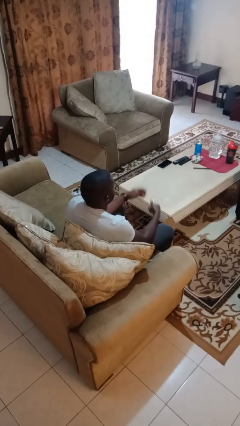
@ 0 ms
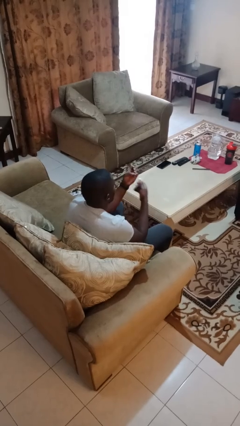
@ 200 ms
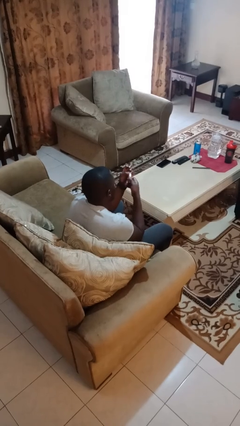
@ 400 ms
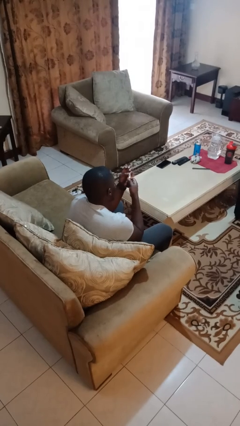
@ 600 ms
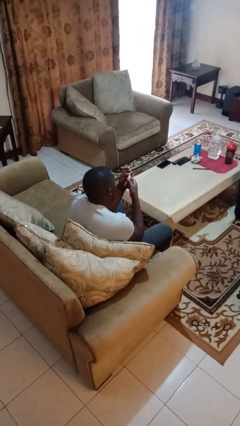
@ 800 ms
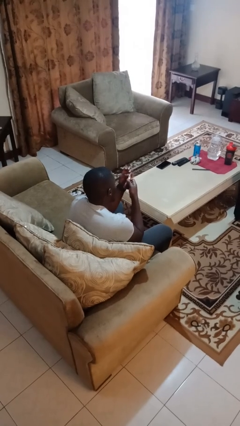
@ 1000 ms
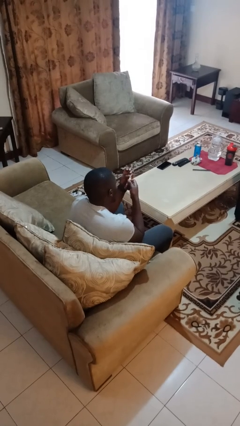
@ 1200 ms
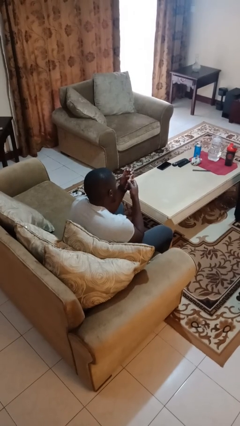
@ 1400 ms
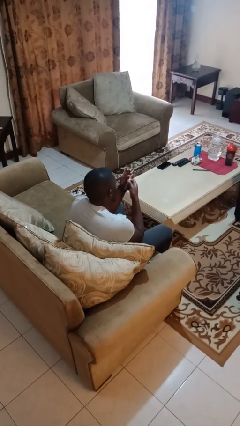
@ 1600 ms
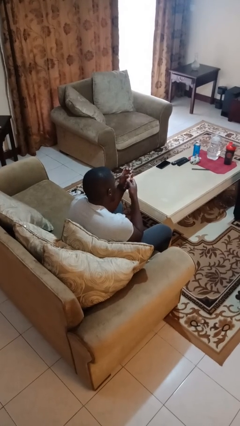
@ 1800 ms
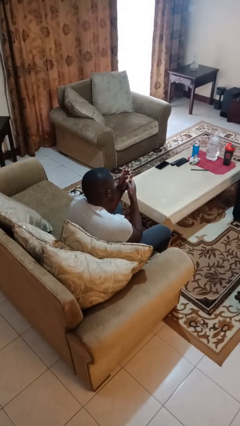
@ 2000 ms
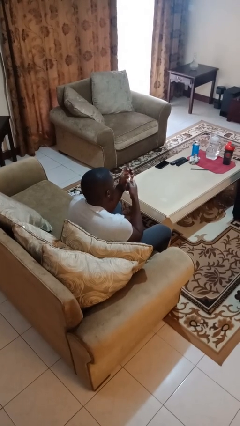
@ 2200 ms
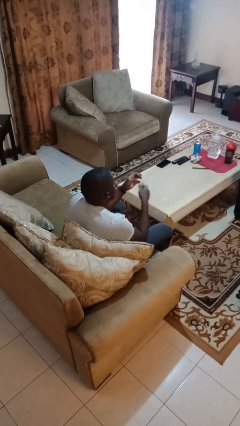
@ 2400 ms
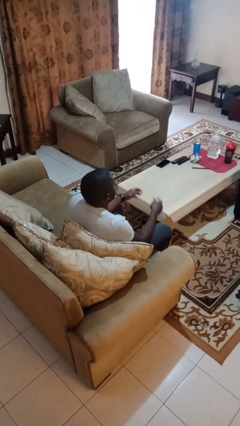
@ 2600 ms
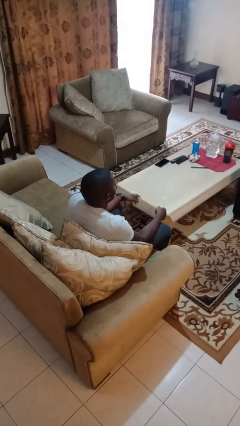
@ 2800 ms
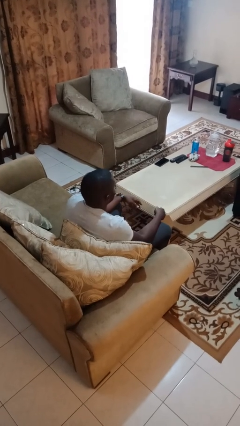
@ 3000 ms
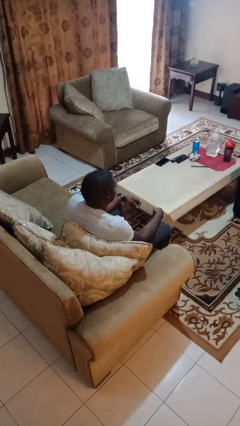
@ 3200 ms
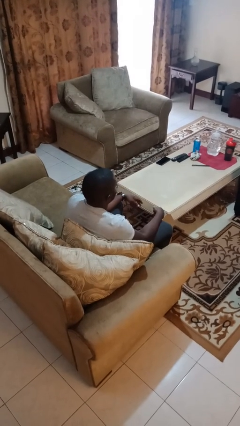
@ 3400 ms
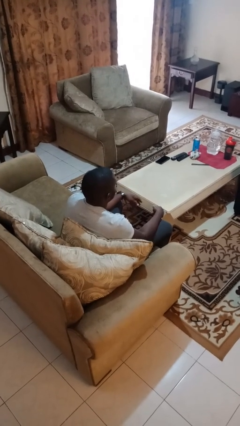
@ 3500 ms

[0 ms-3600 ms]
person clips fingernails

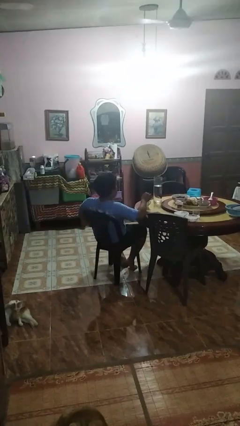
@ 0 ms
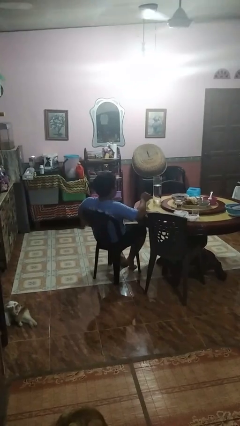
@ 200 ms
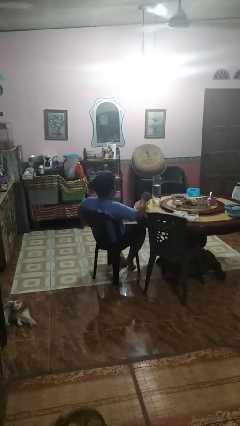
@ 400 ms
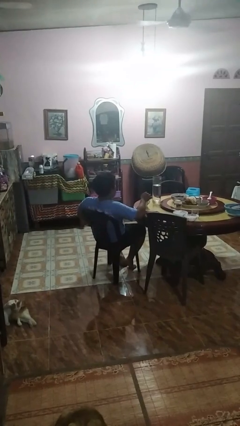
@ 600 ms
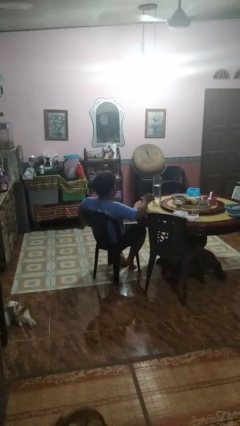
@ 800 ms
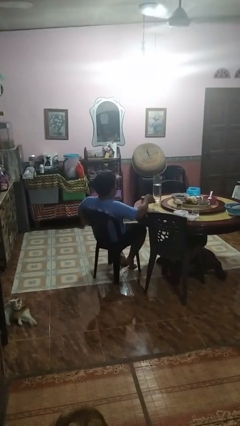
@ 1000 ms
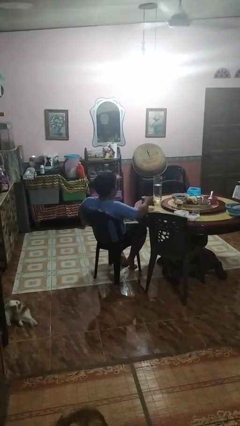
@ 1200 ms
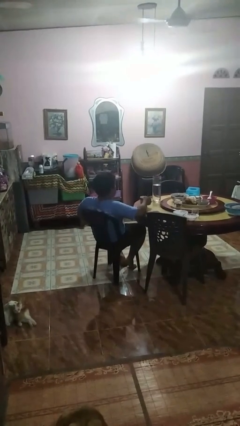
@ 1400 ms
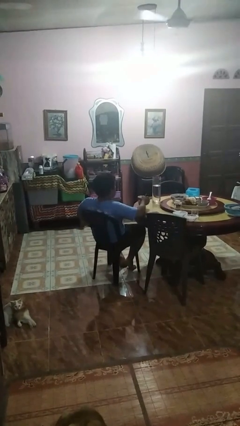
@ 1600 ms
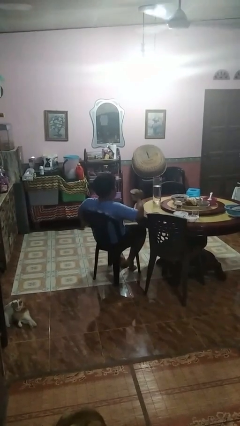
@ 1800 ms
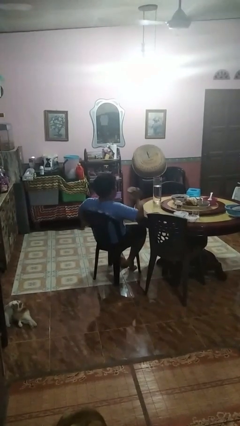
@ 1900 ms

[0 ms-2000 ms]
person stirs mug

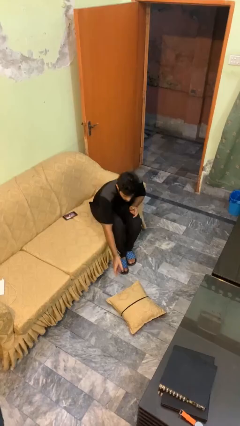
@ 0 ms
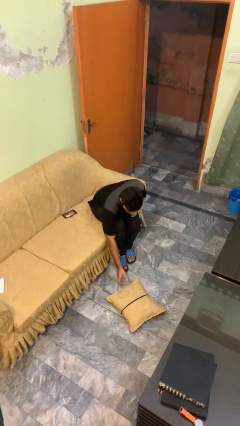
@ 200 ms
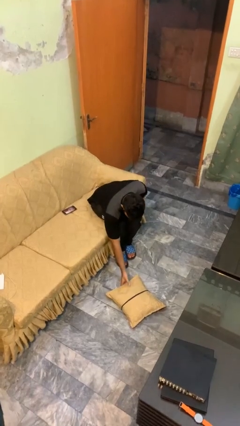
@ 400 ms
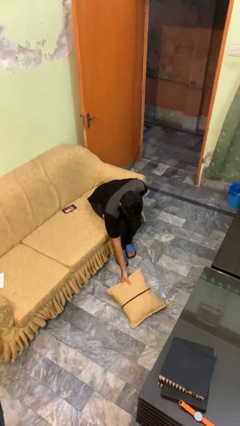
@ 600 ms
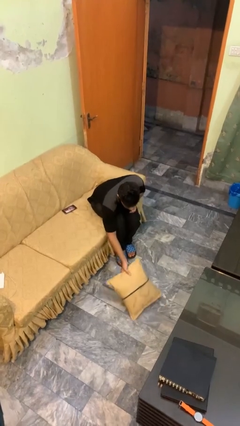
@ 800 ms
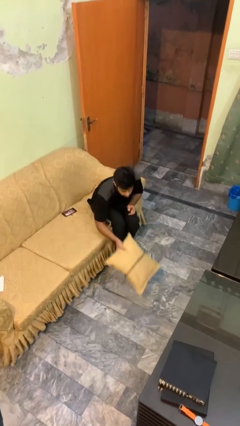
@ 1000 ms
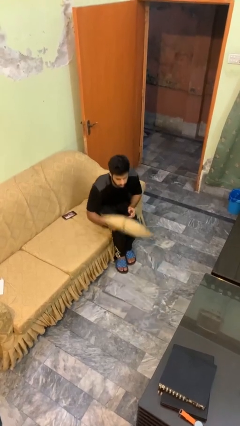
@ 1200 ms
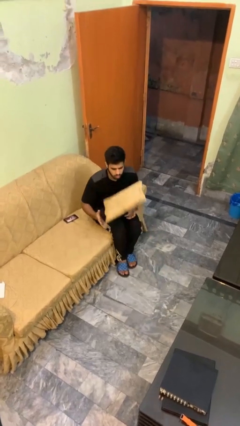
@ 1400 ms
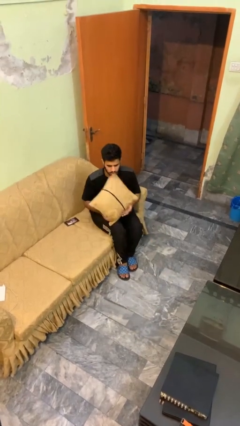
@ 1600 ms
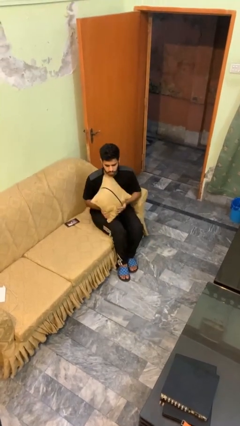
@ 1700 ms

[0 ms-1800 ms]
person picks up object from floor

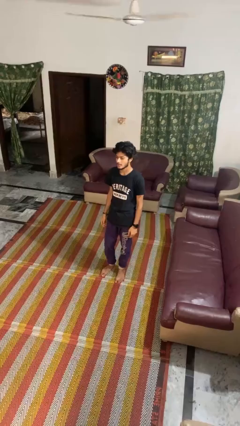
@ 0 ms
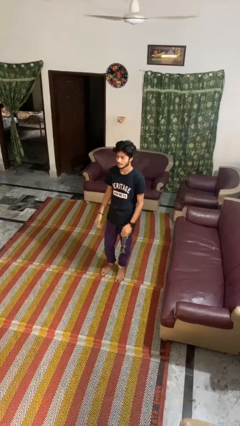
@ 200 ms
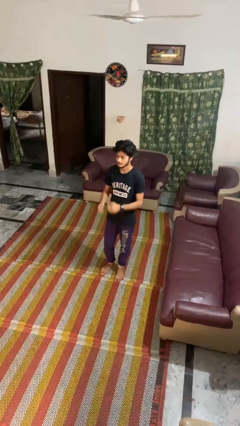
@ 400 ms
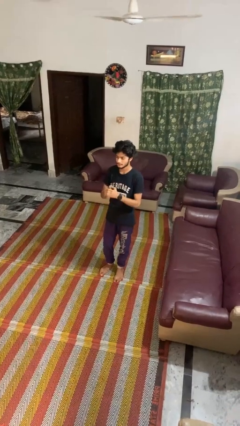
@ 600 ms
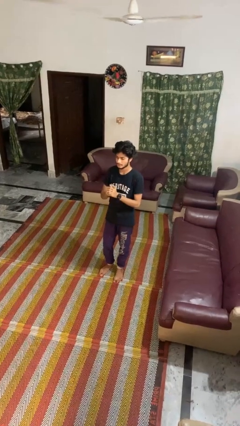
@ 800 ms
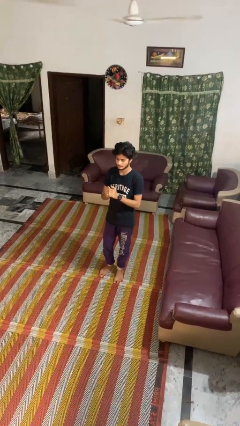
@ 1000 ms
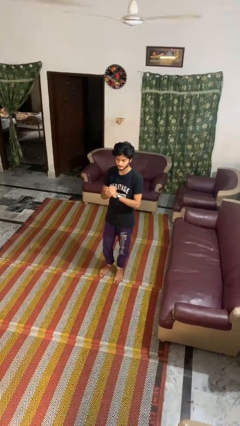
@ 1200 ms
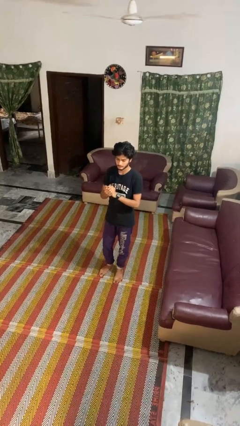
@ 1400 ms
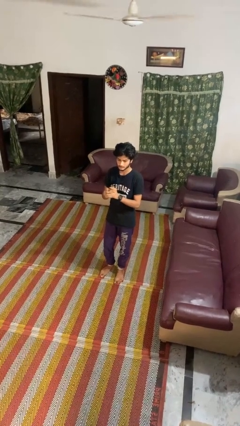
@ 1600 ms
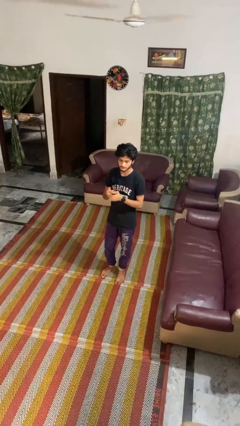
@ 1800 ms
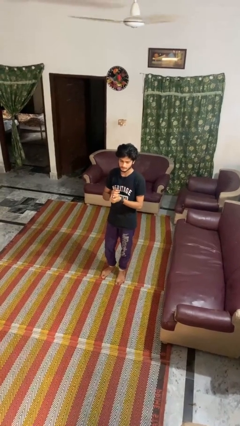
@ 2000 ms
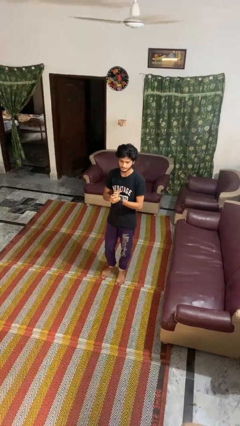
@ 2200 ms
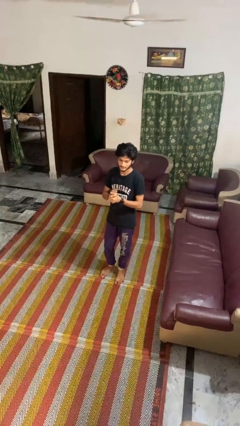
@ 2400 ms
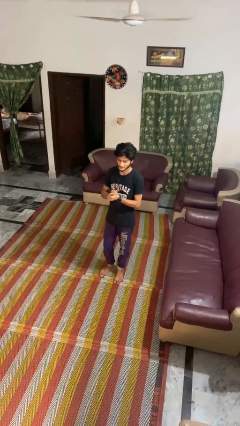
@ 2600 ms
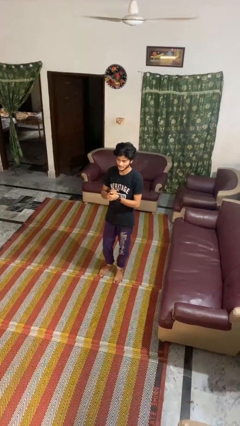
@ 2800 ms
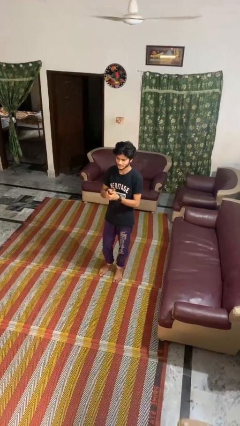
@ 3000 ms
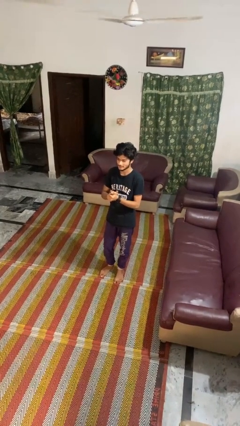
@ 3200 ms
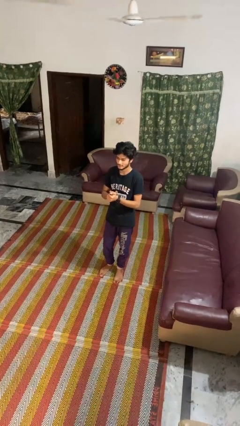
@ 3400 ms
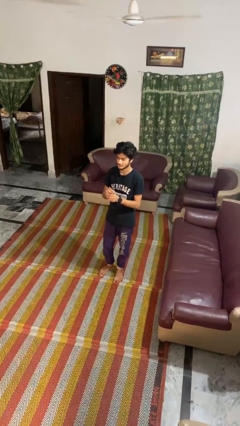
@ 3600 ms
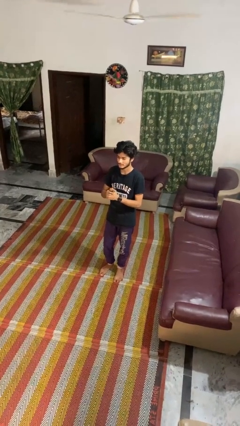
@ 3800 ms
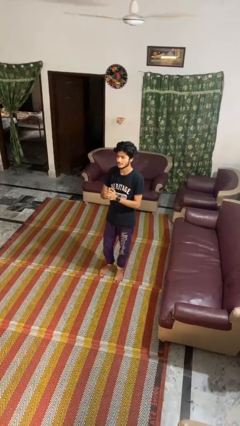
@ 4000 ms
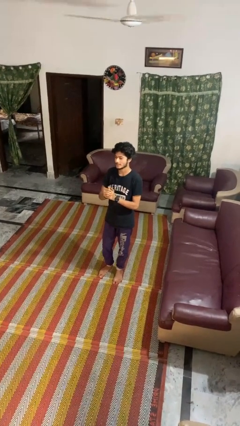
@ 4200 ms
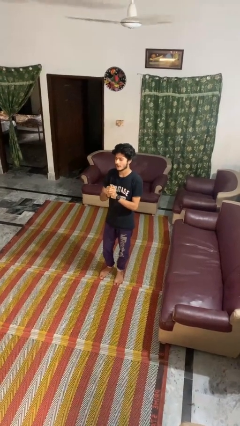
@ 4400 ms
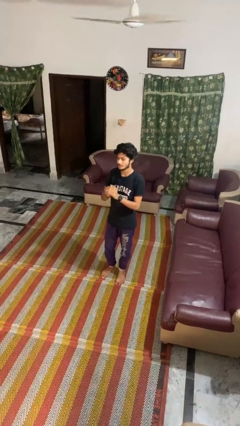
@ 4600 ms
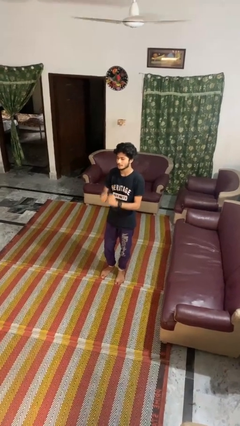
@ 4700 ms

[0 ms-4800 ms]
person cracks knuckles

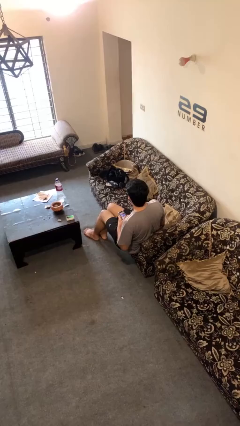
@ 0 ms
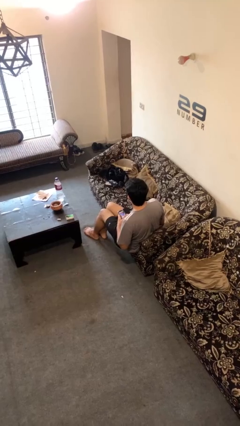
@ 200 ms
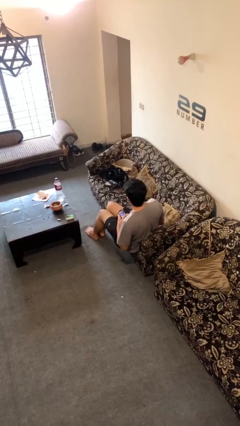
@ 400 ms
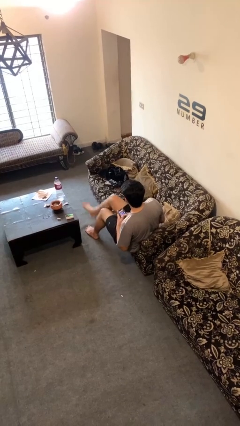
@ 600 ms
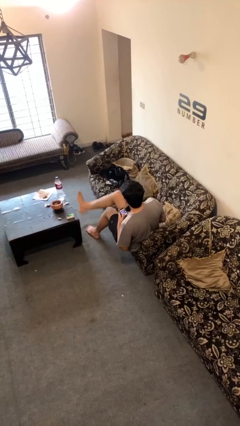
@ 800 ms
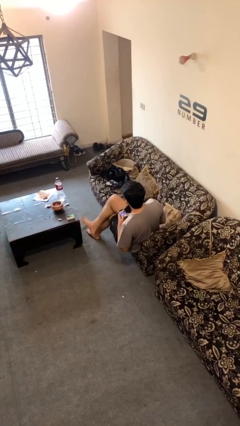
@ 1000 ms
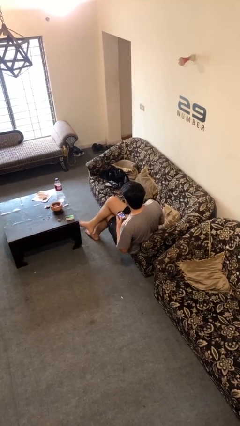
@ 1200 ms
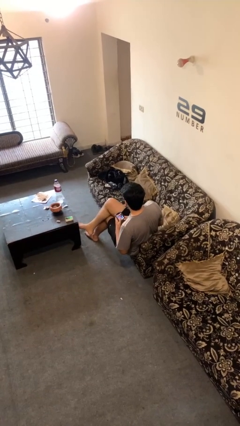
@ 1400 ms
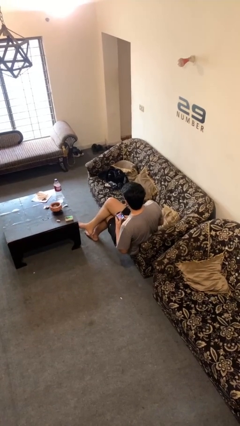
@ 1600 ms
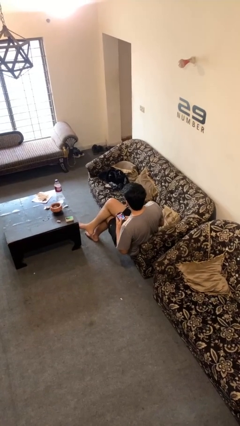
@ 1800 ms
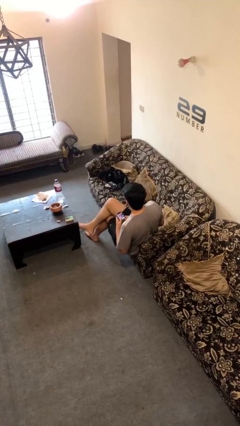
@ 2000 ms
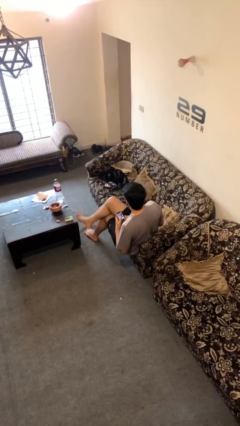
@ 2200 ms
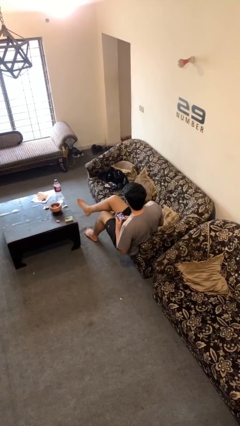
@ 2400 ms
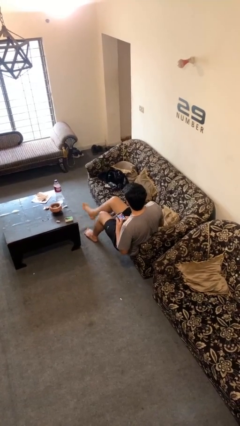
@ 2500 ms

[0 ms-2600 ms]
person crosses legs

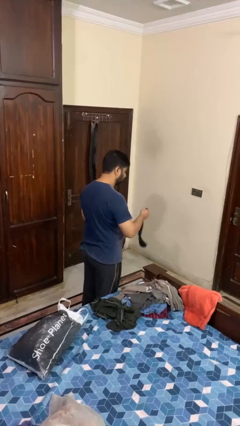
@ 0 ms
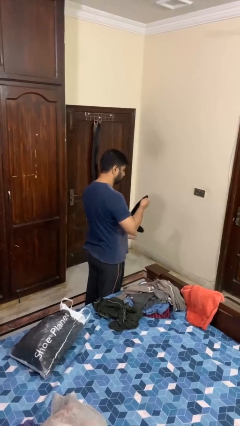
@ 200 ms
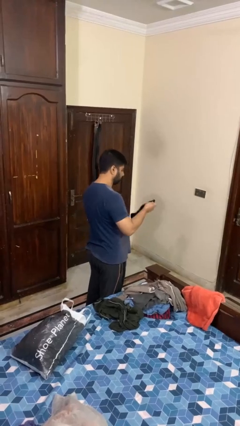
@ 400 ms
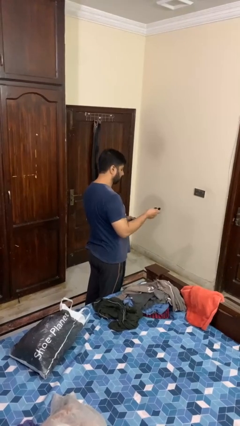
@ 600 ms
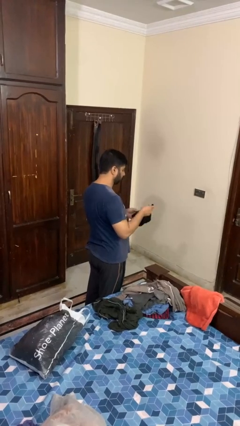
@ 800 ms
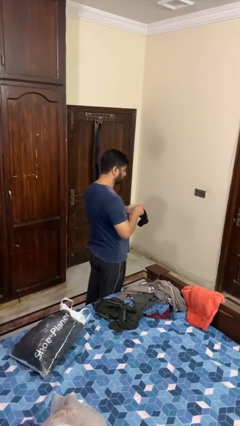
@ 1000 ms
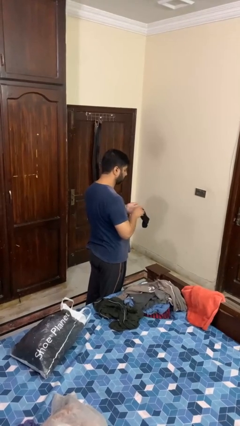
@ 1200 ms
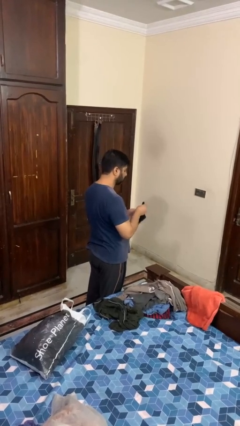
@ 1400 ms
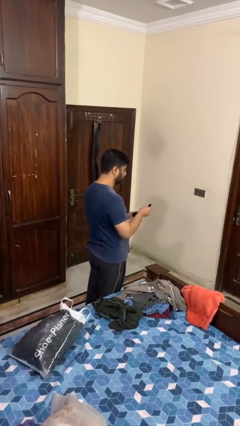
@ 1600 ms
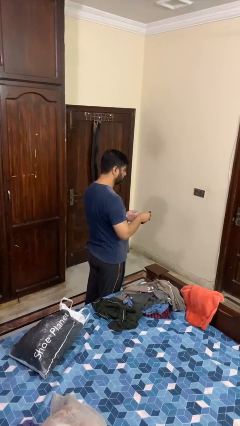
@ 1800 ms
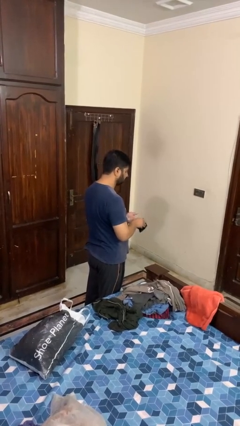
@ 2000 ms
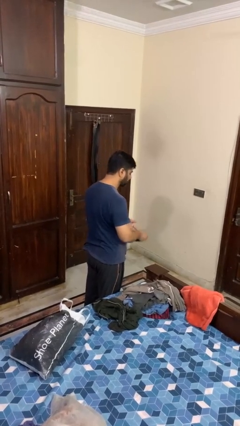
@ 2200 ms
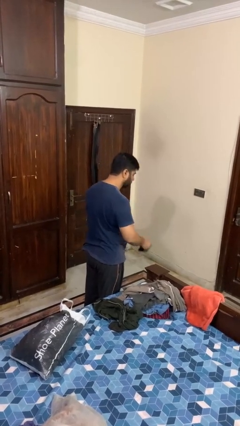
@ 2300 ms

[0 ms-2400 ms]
person folds socks

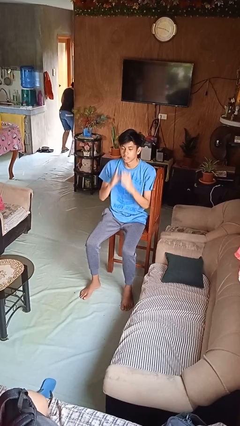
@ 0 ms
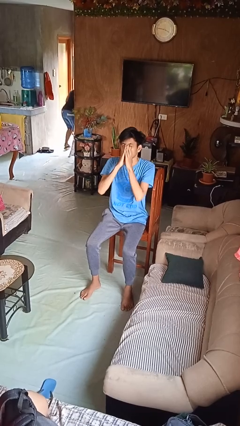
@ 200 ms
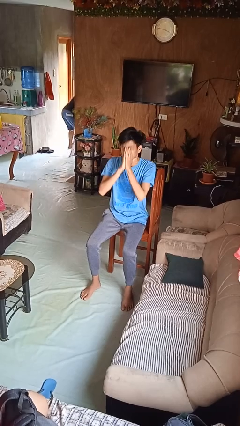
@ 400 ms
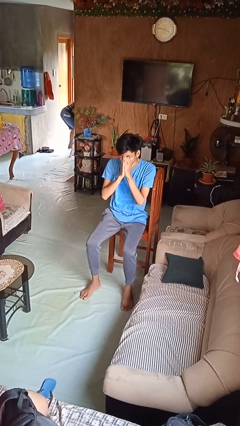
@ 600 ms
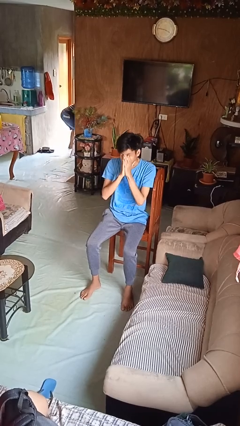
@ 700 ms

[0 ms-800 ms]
person sneezes into hand
